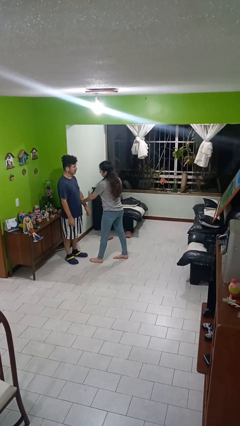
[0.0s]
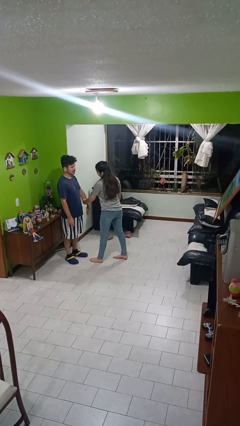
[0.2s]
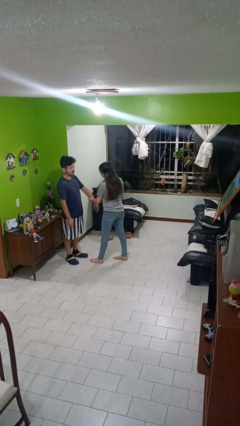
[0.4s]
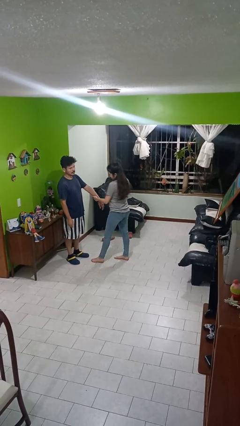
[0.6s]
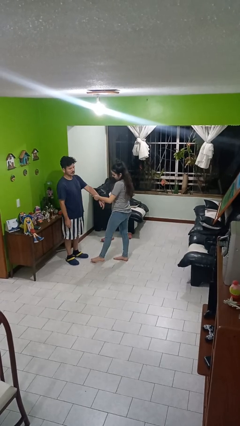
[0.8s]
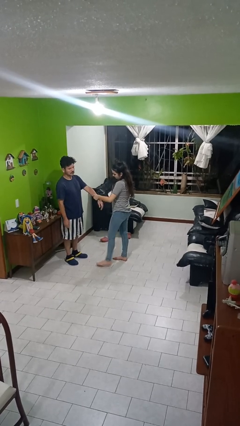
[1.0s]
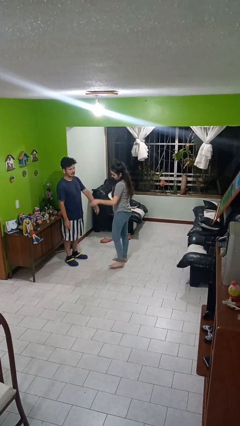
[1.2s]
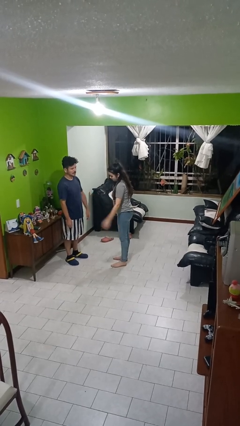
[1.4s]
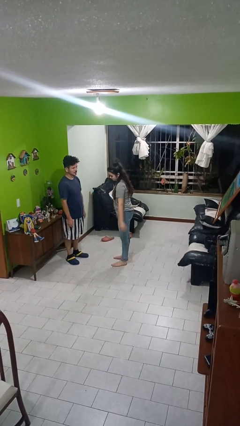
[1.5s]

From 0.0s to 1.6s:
person grabs person by forearm

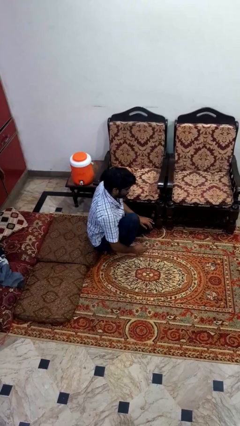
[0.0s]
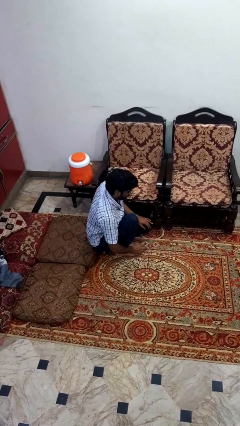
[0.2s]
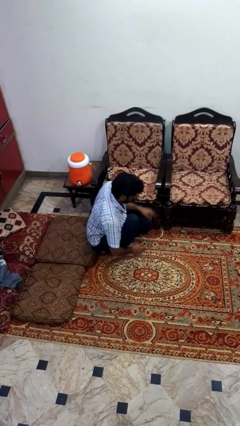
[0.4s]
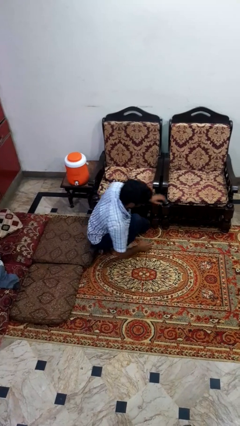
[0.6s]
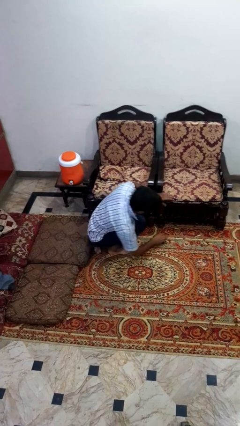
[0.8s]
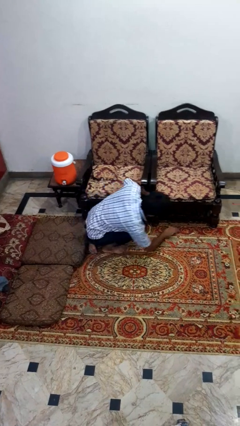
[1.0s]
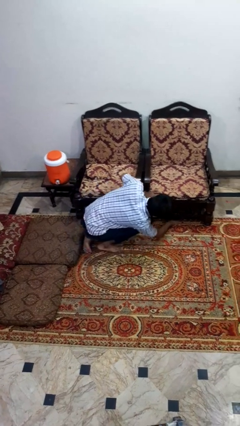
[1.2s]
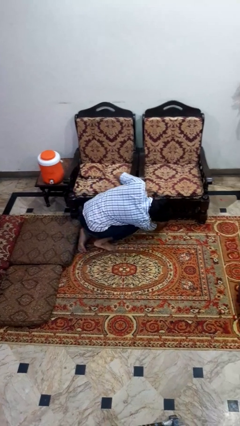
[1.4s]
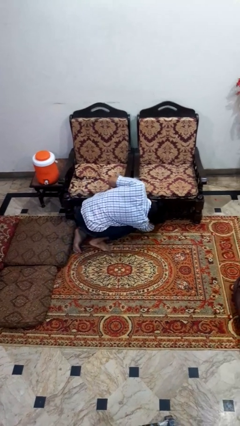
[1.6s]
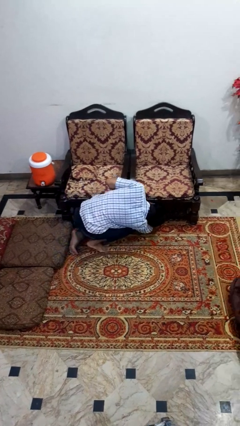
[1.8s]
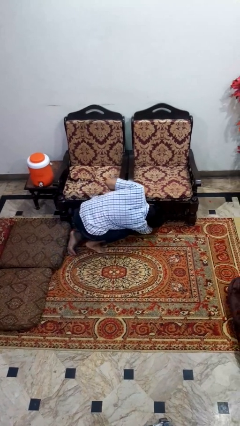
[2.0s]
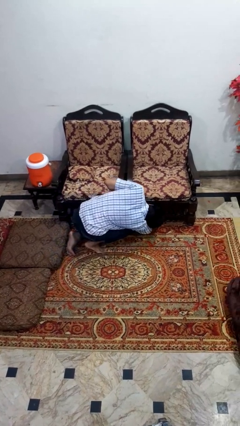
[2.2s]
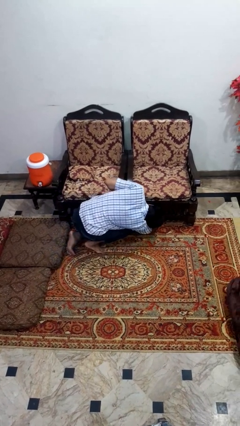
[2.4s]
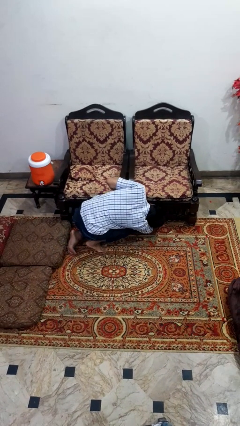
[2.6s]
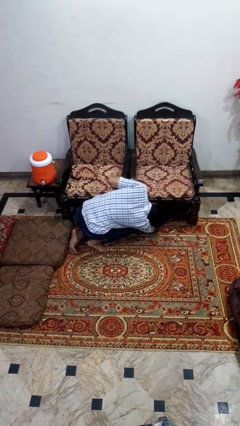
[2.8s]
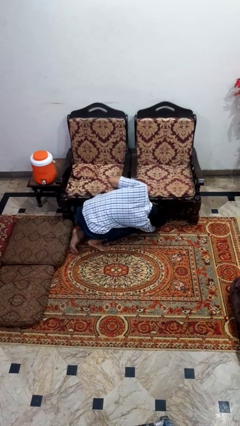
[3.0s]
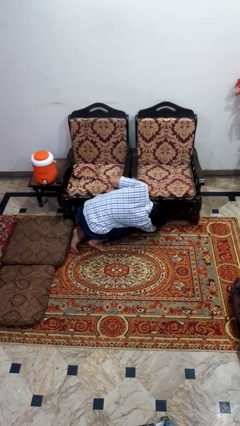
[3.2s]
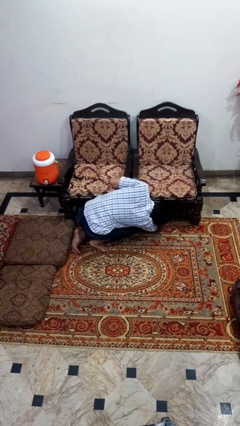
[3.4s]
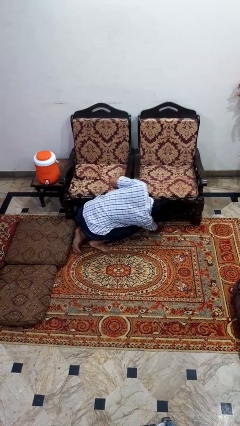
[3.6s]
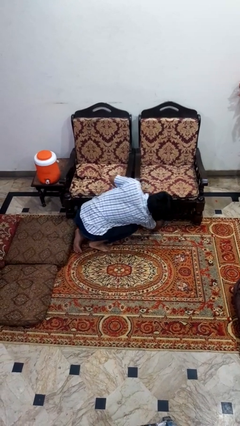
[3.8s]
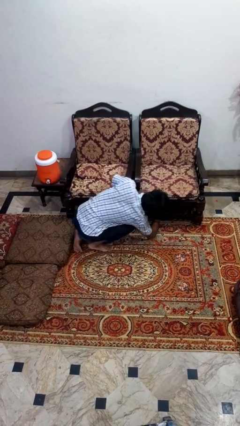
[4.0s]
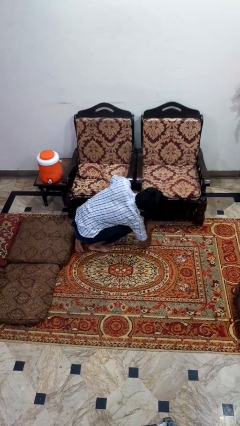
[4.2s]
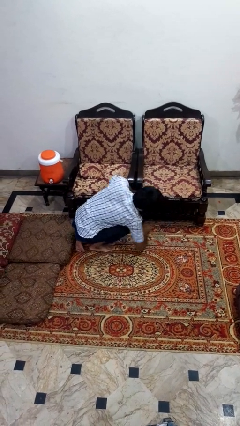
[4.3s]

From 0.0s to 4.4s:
person searches under couch

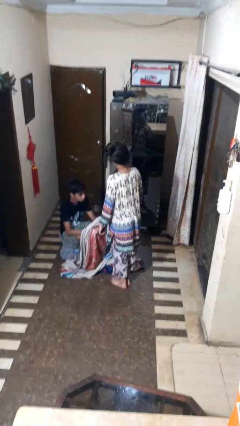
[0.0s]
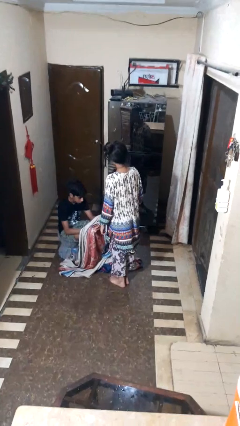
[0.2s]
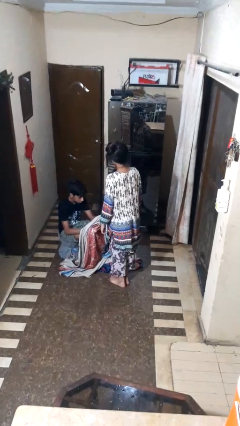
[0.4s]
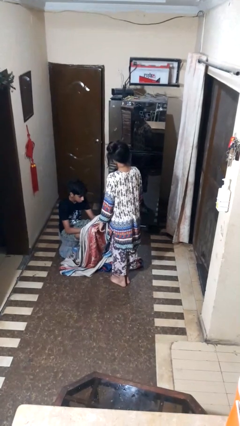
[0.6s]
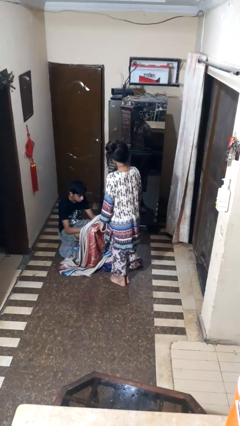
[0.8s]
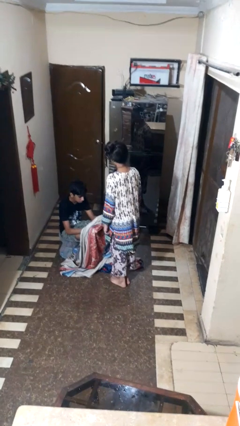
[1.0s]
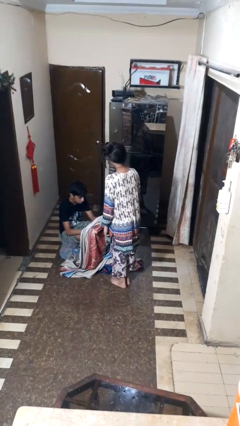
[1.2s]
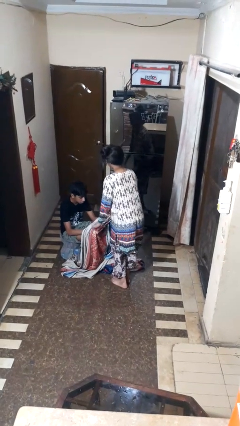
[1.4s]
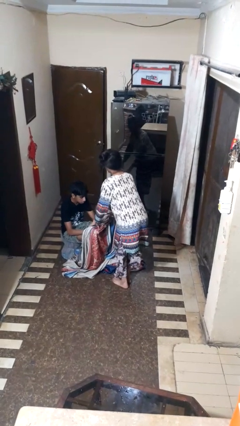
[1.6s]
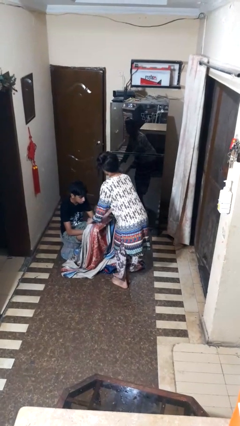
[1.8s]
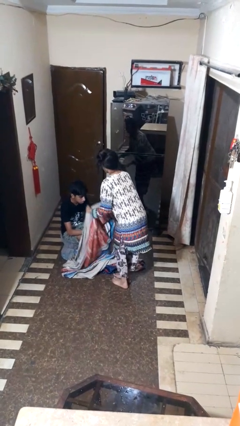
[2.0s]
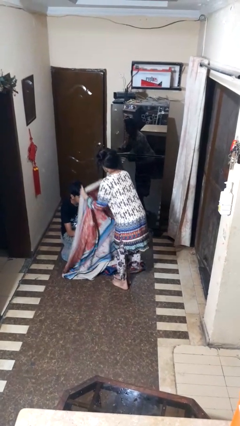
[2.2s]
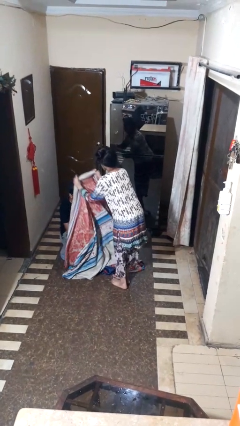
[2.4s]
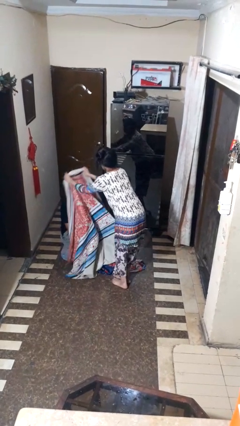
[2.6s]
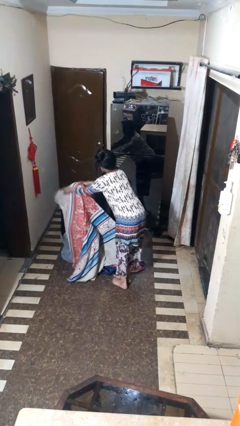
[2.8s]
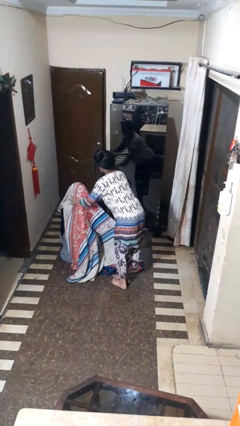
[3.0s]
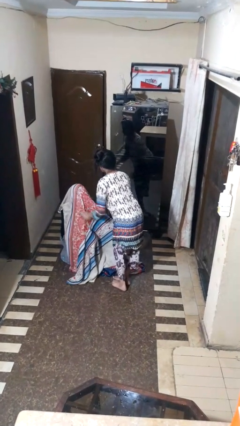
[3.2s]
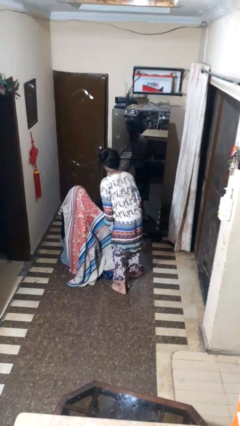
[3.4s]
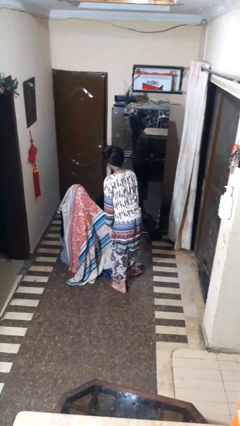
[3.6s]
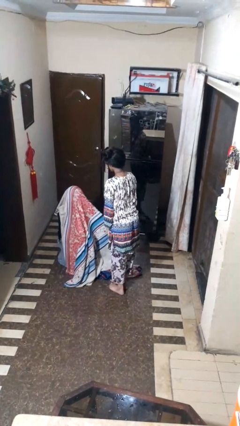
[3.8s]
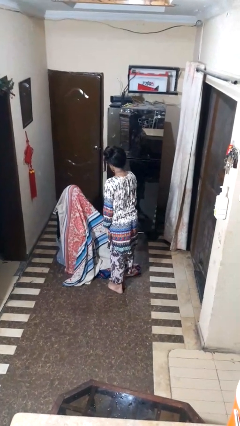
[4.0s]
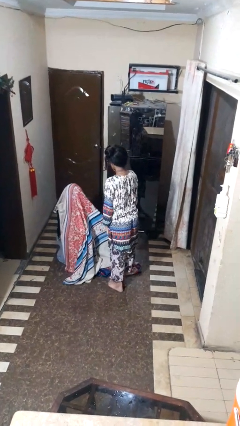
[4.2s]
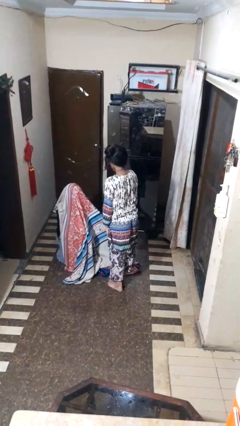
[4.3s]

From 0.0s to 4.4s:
person covers friend with blanket

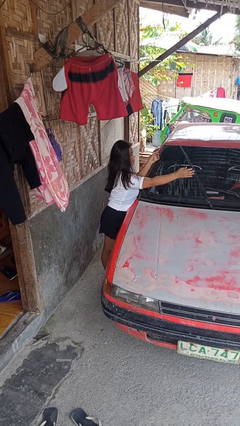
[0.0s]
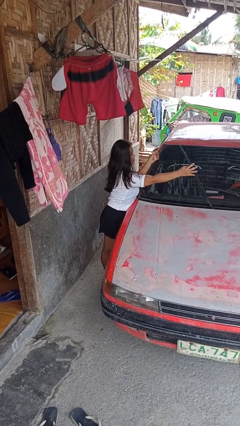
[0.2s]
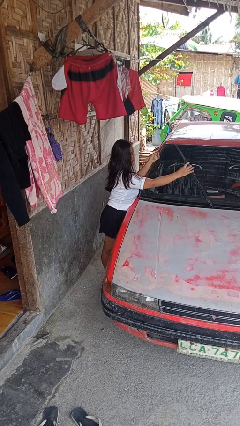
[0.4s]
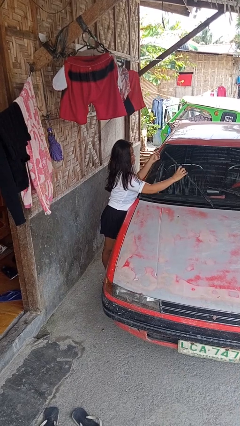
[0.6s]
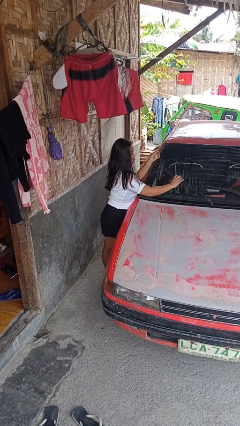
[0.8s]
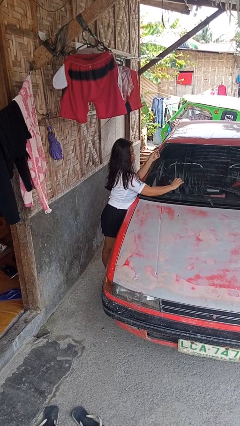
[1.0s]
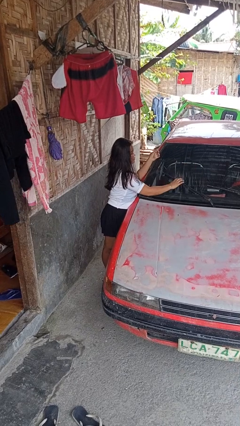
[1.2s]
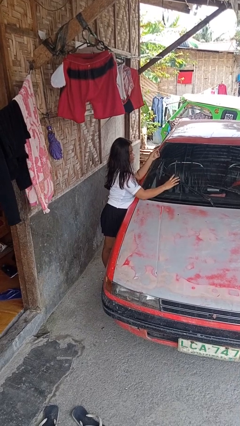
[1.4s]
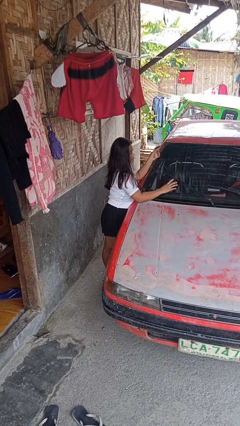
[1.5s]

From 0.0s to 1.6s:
person flips down car wipers

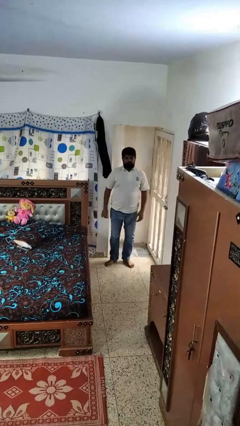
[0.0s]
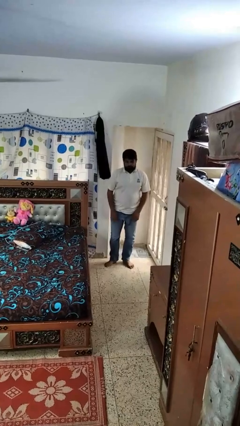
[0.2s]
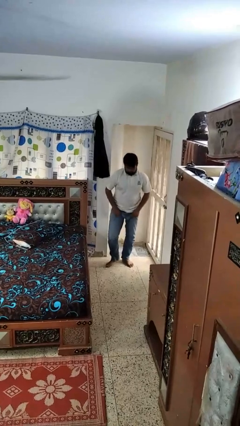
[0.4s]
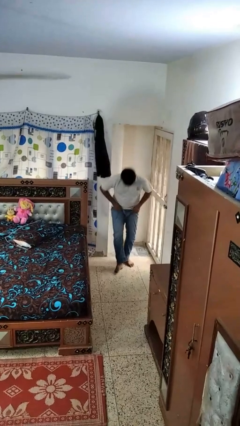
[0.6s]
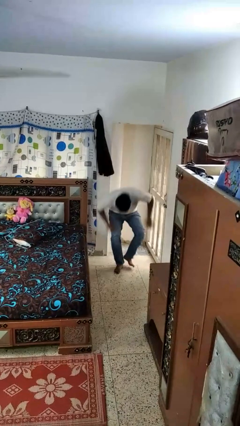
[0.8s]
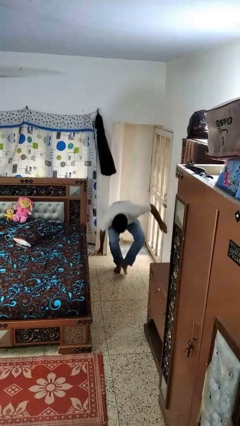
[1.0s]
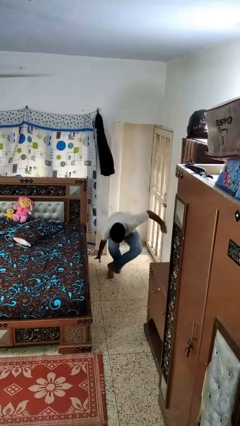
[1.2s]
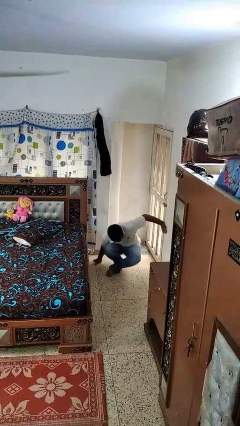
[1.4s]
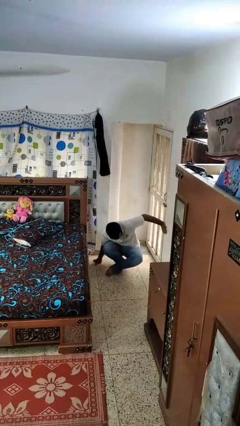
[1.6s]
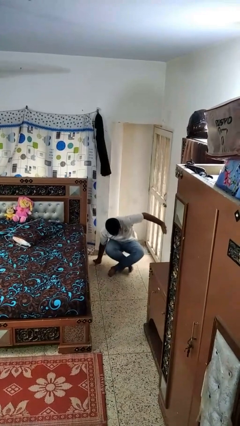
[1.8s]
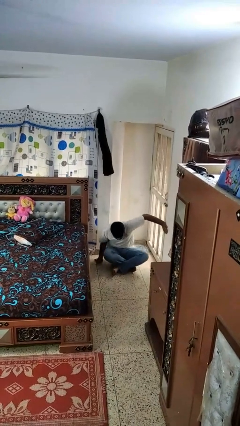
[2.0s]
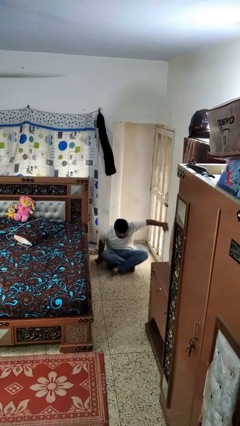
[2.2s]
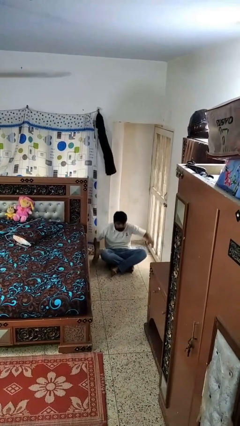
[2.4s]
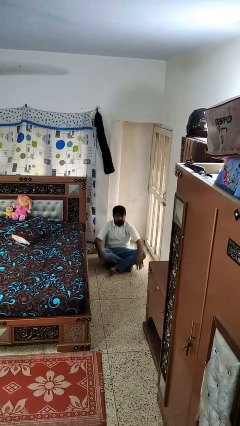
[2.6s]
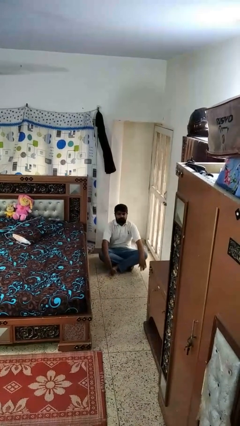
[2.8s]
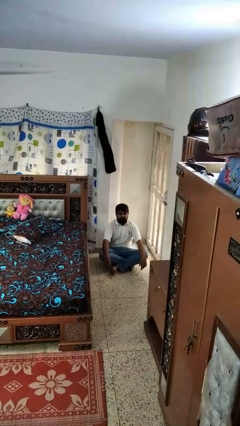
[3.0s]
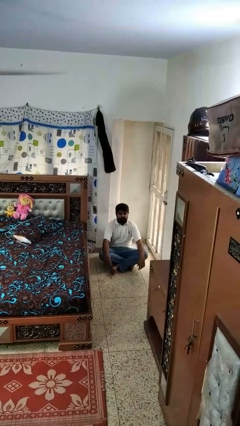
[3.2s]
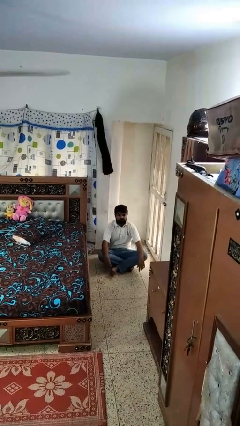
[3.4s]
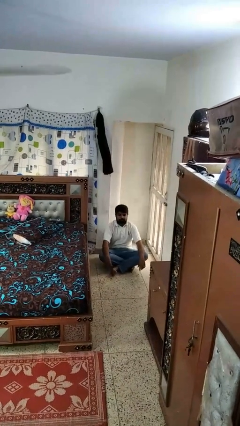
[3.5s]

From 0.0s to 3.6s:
person sits crisscross

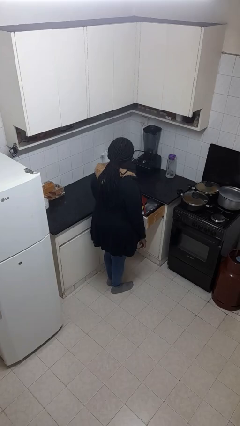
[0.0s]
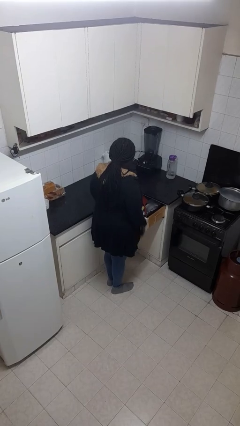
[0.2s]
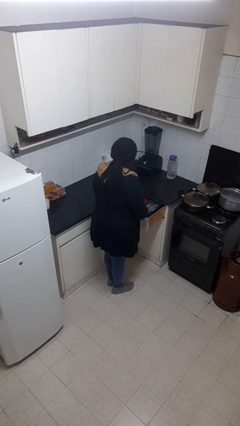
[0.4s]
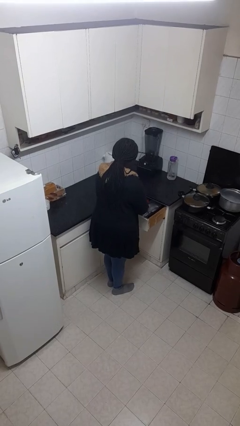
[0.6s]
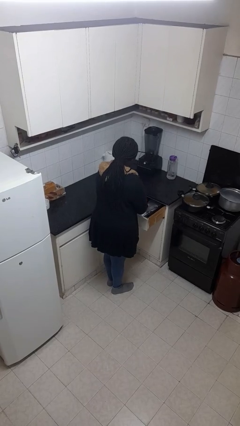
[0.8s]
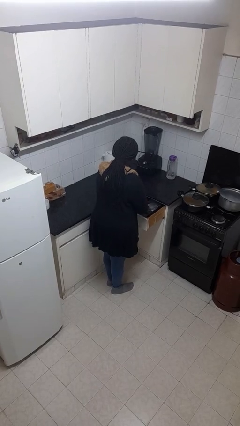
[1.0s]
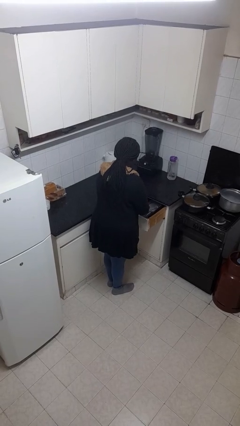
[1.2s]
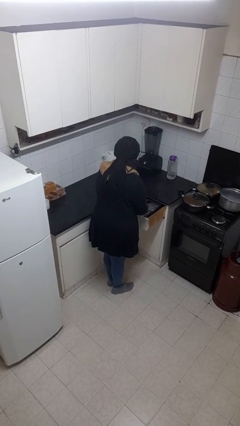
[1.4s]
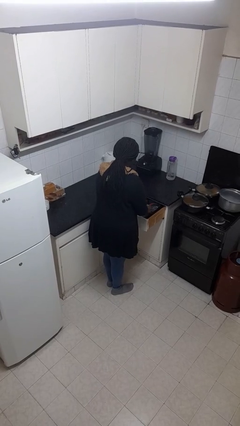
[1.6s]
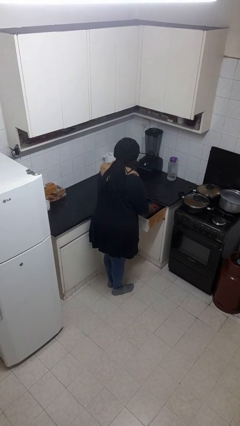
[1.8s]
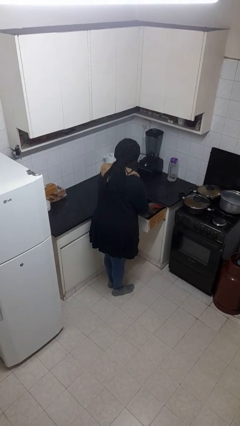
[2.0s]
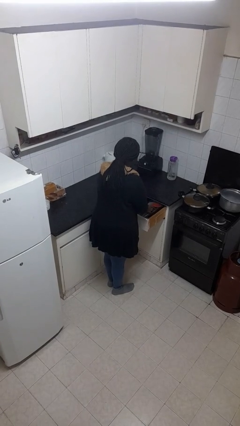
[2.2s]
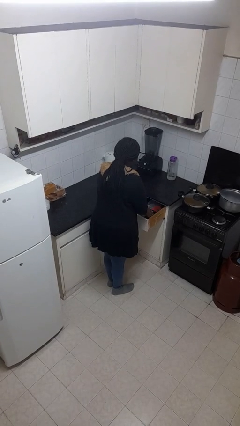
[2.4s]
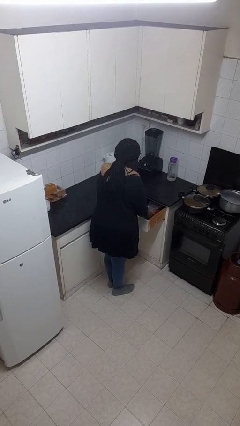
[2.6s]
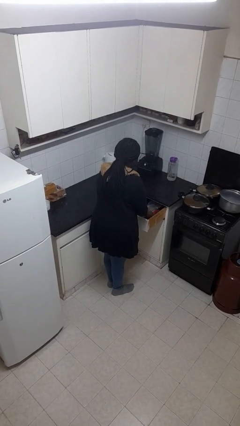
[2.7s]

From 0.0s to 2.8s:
person searches in kitchen drawer
